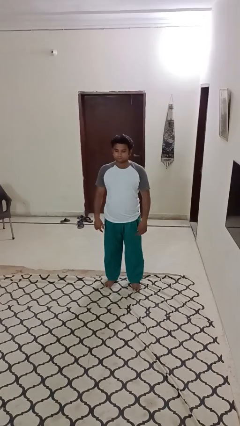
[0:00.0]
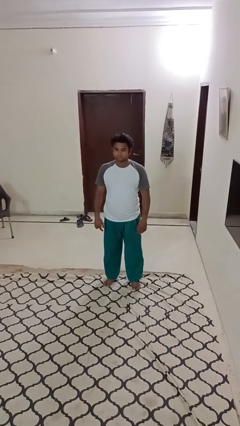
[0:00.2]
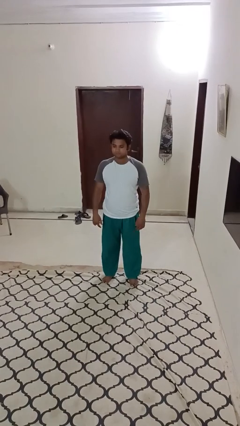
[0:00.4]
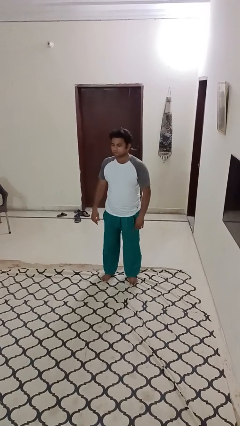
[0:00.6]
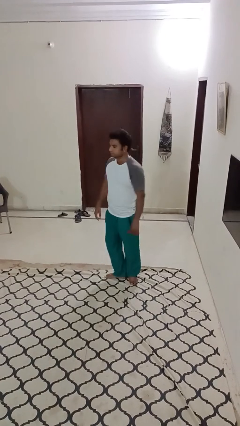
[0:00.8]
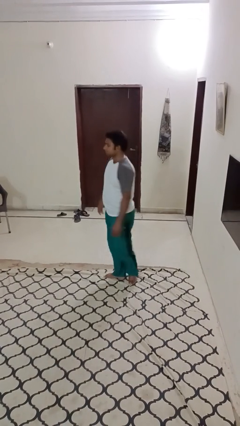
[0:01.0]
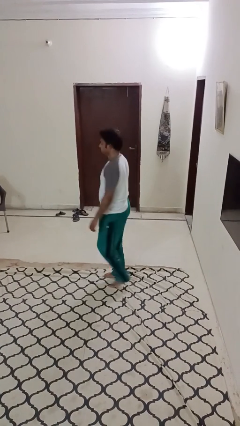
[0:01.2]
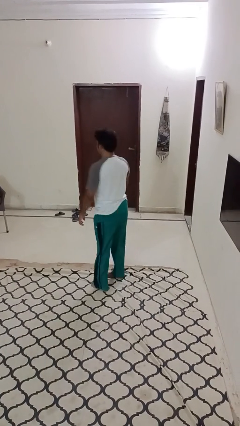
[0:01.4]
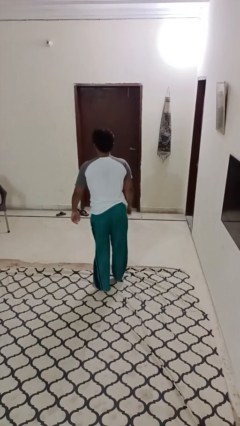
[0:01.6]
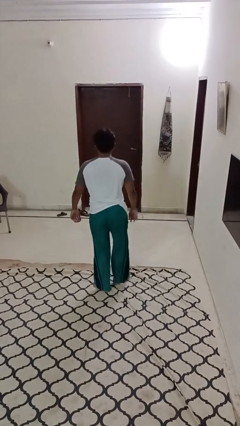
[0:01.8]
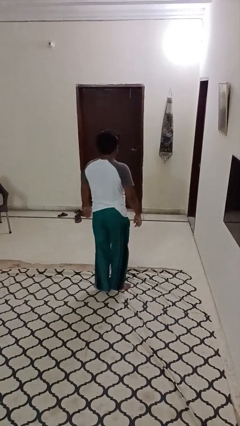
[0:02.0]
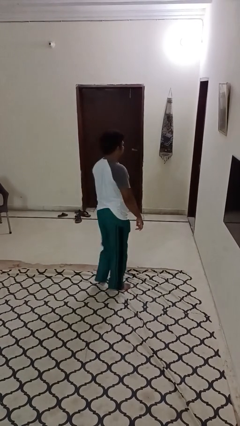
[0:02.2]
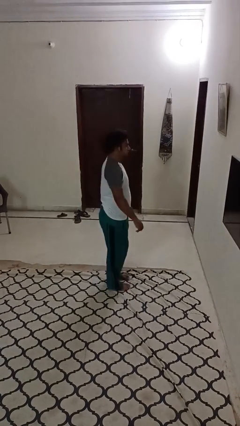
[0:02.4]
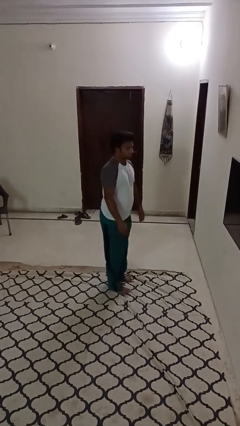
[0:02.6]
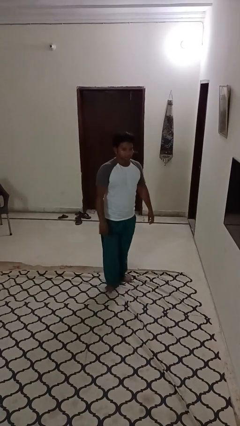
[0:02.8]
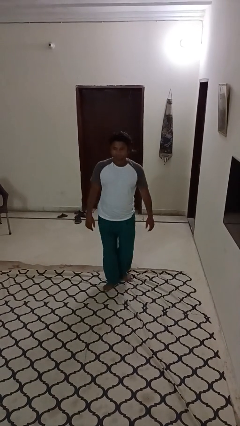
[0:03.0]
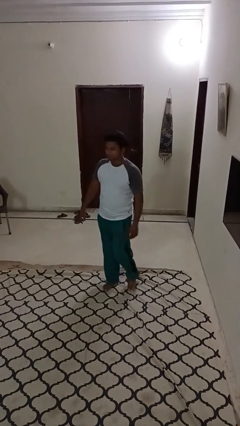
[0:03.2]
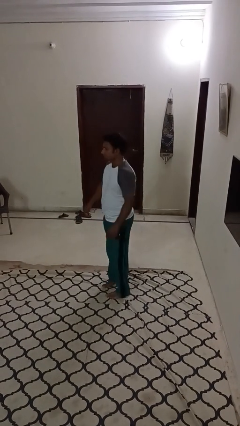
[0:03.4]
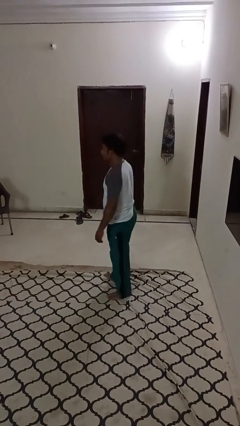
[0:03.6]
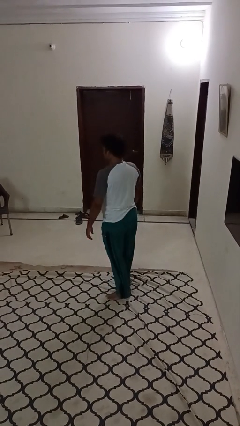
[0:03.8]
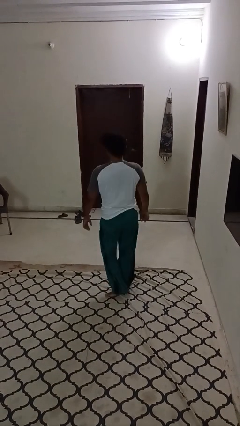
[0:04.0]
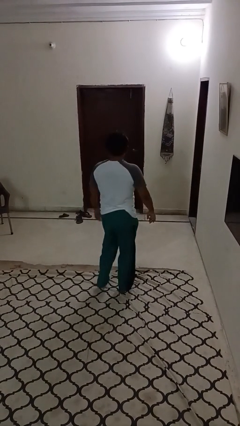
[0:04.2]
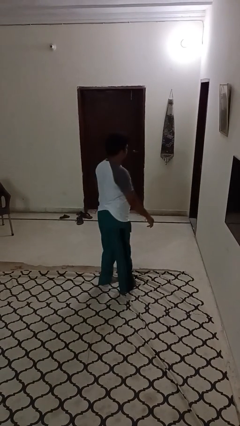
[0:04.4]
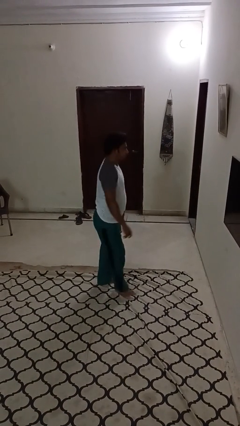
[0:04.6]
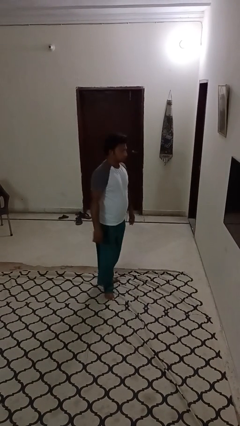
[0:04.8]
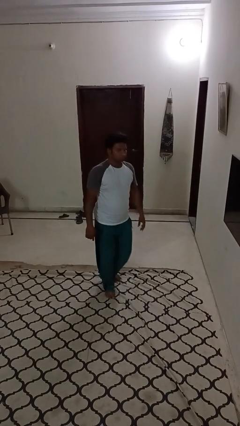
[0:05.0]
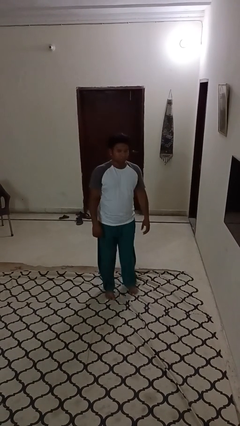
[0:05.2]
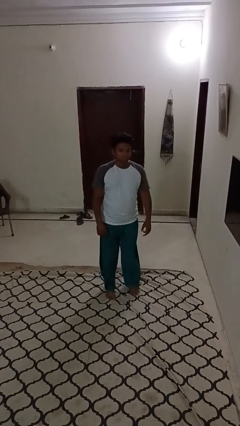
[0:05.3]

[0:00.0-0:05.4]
person twirls

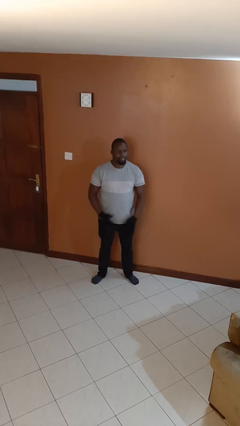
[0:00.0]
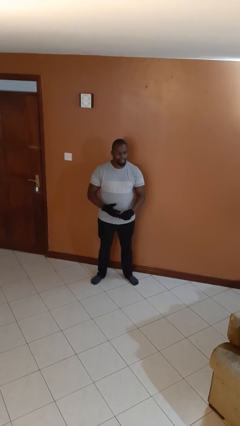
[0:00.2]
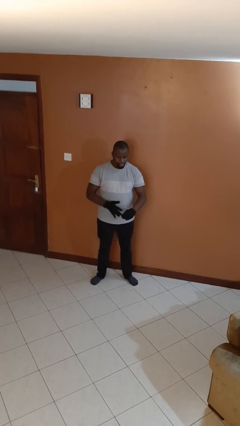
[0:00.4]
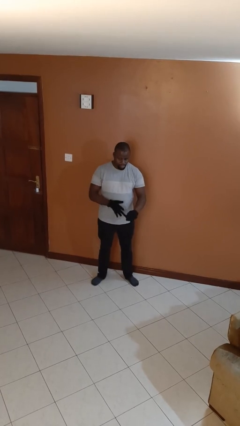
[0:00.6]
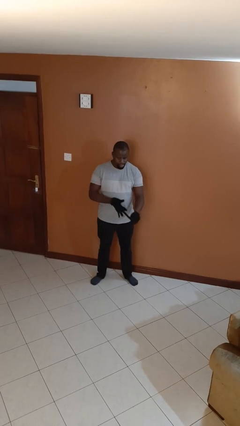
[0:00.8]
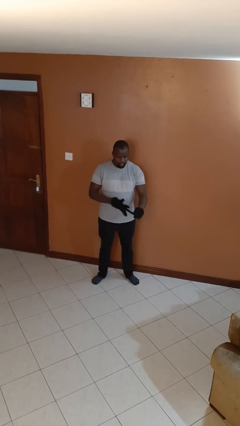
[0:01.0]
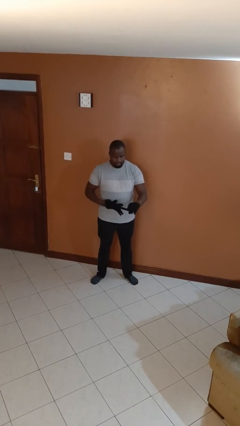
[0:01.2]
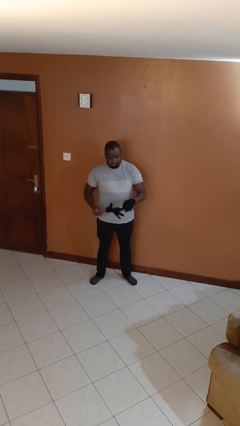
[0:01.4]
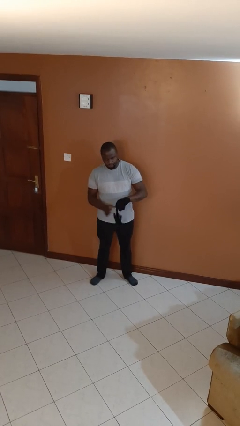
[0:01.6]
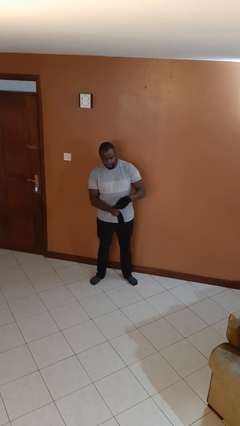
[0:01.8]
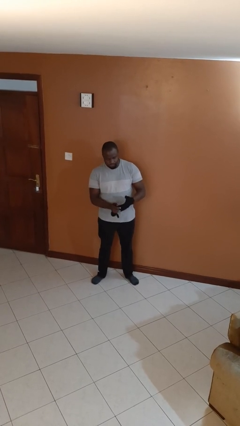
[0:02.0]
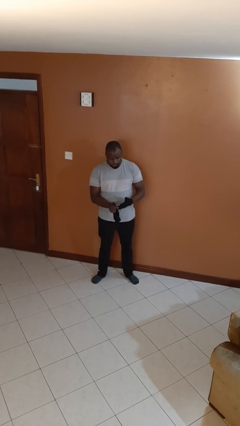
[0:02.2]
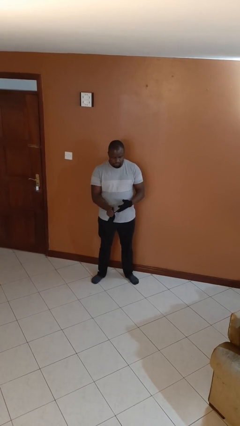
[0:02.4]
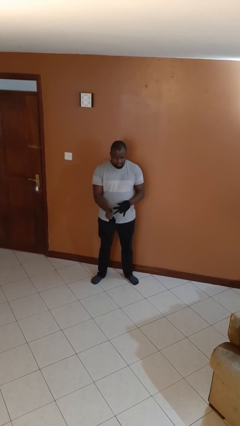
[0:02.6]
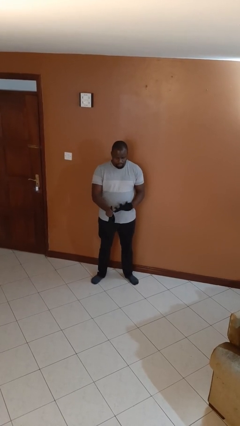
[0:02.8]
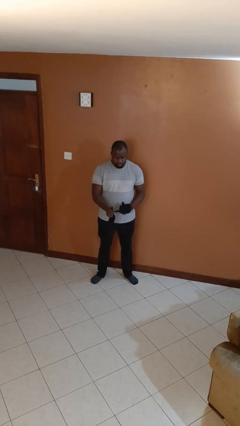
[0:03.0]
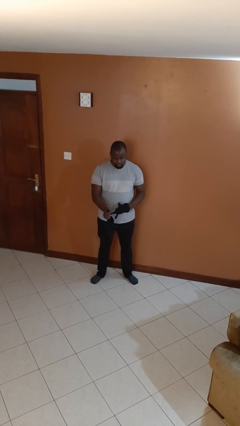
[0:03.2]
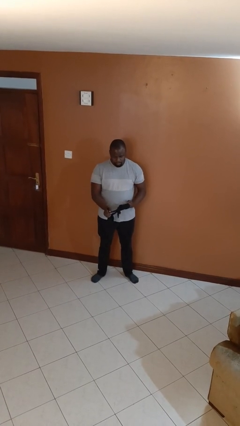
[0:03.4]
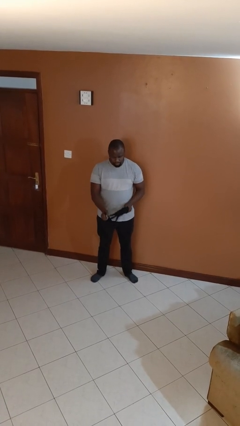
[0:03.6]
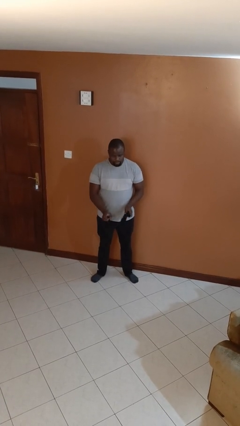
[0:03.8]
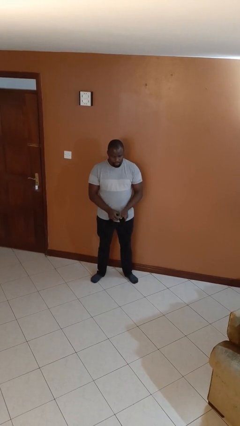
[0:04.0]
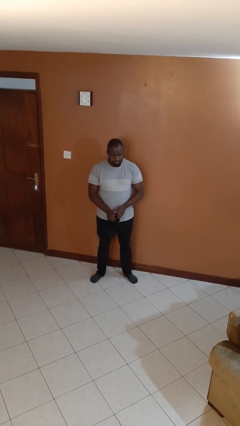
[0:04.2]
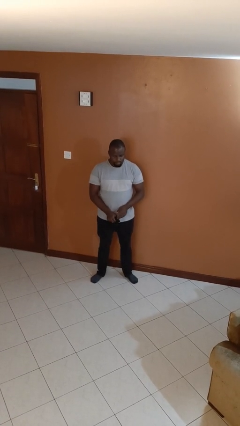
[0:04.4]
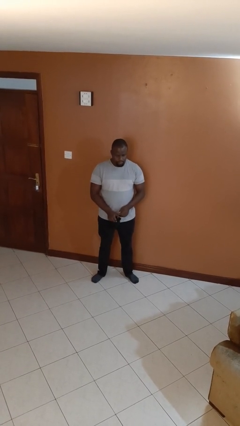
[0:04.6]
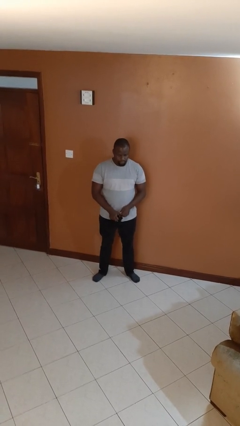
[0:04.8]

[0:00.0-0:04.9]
person takes off gloves

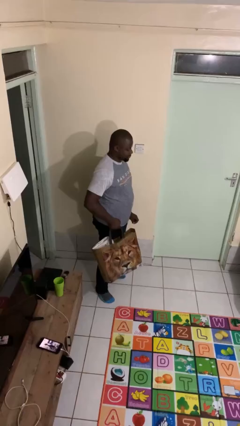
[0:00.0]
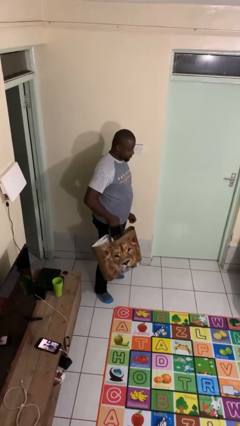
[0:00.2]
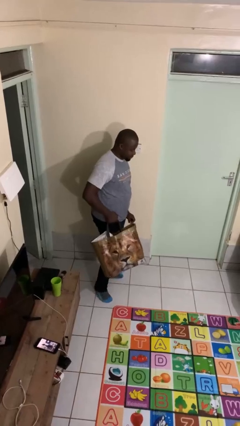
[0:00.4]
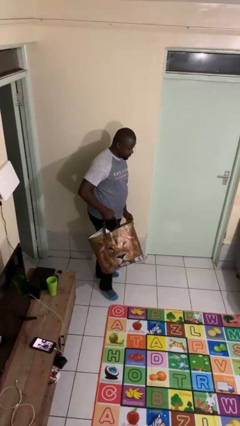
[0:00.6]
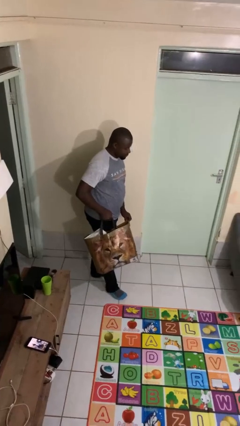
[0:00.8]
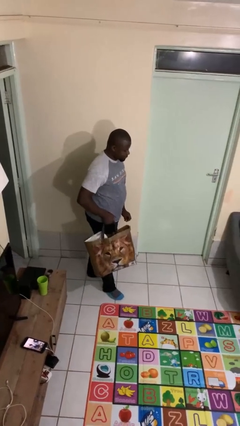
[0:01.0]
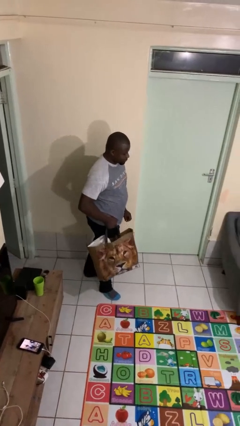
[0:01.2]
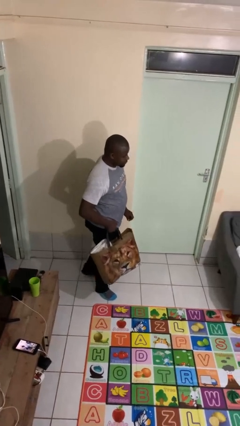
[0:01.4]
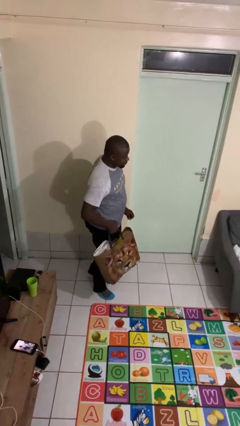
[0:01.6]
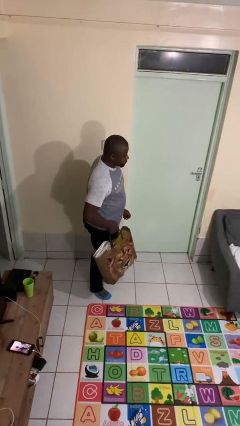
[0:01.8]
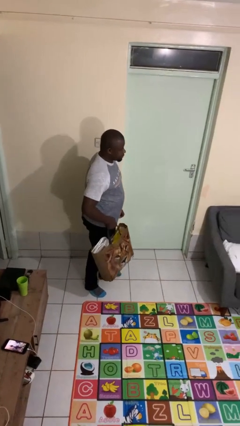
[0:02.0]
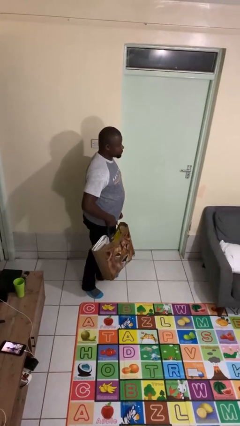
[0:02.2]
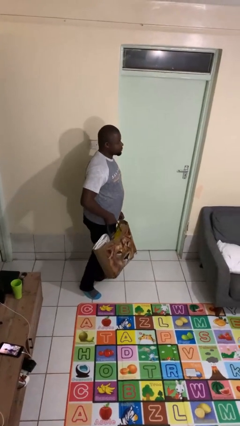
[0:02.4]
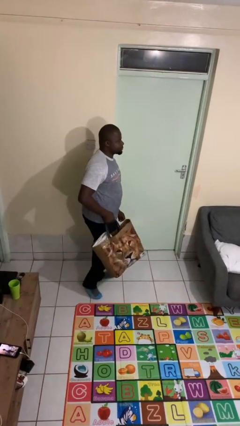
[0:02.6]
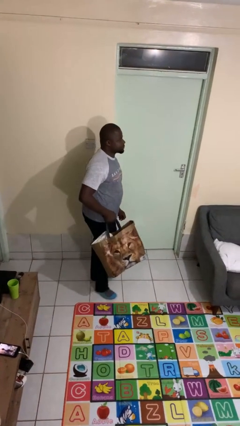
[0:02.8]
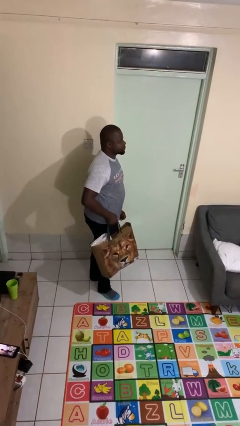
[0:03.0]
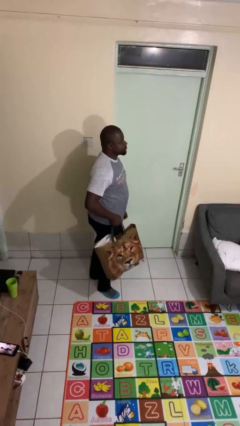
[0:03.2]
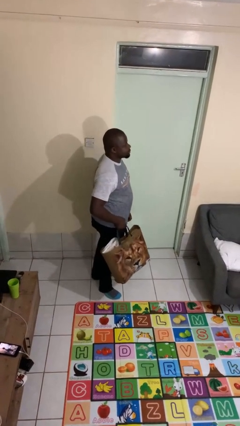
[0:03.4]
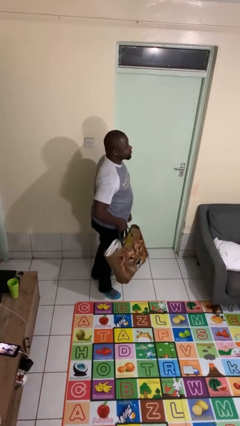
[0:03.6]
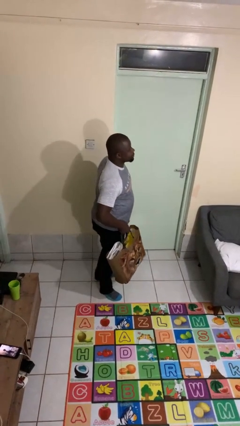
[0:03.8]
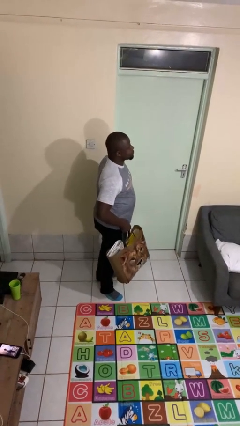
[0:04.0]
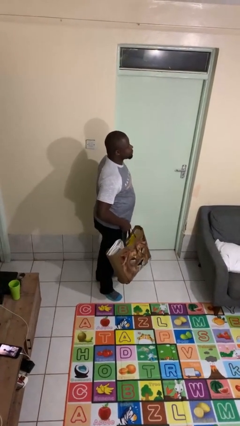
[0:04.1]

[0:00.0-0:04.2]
person carries groceries

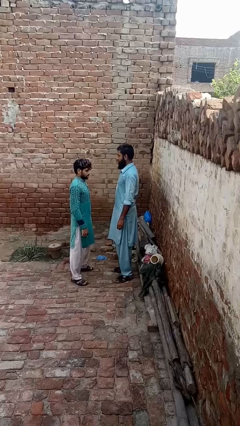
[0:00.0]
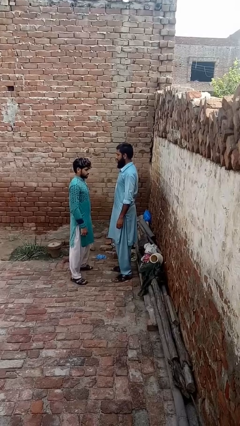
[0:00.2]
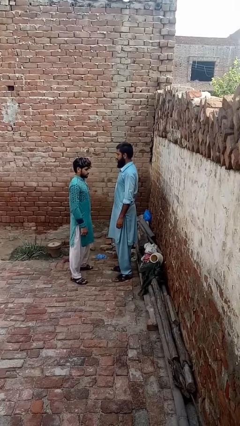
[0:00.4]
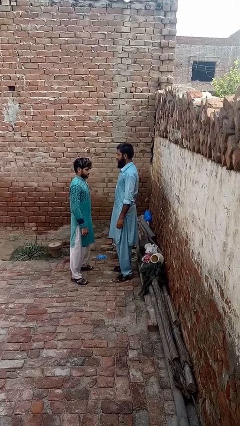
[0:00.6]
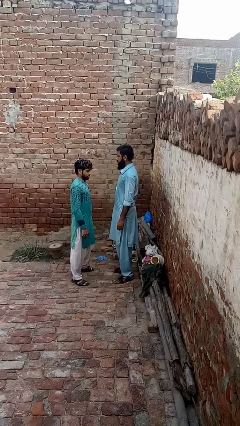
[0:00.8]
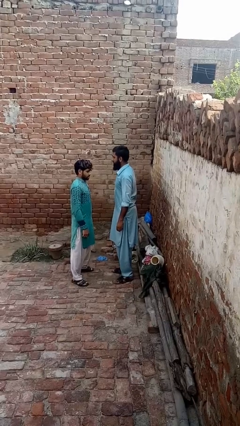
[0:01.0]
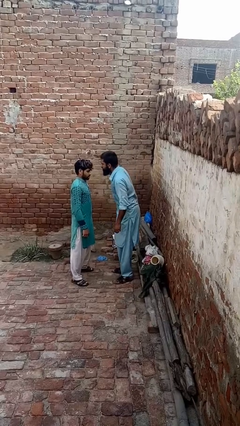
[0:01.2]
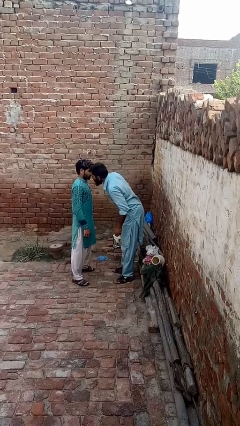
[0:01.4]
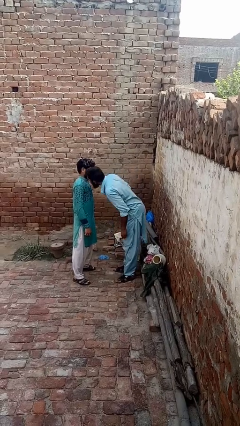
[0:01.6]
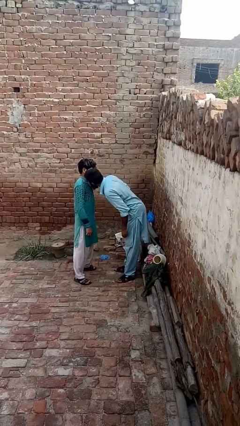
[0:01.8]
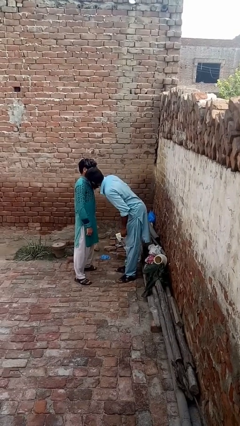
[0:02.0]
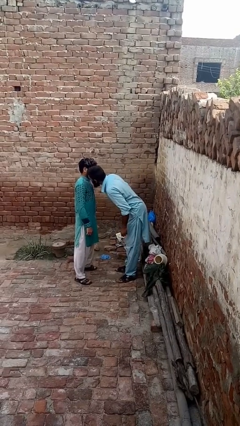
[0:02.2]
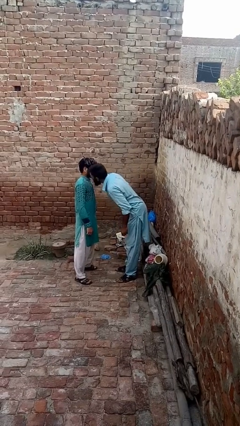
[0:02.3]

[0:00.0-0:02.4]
person kisses cheek of person

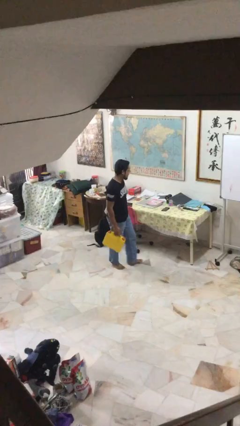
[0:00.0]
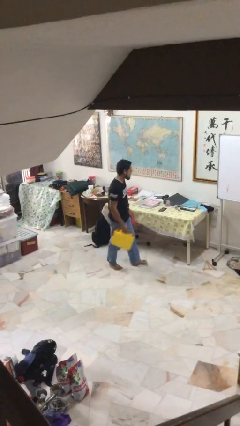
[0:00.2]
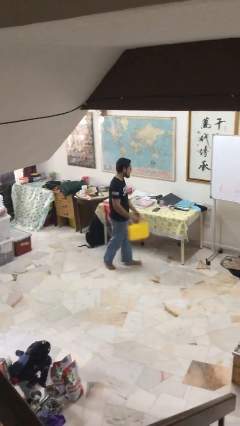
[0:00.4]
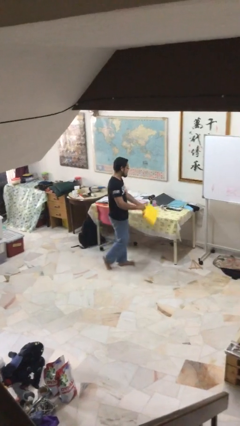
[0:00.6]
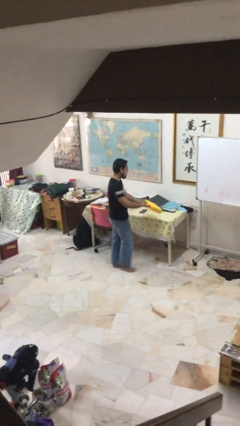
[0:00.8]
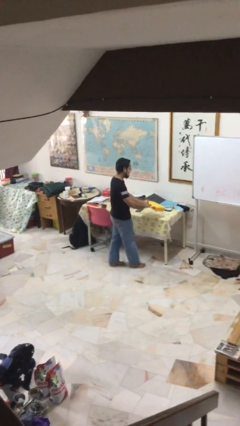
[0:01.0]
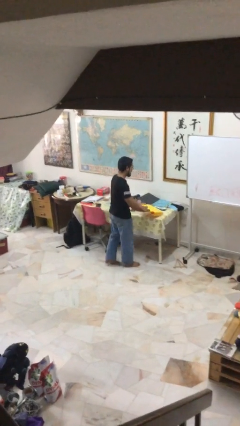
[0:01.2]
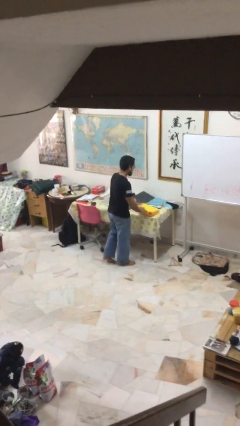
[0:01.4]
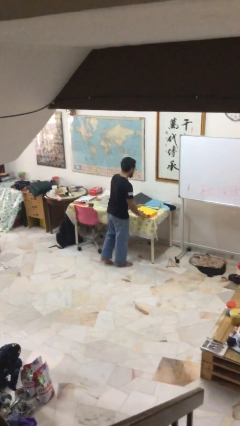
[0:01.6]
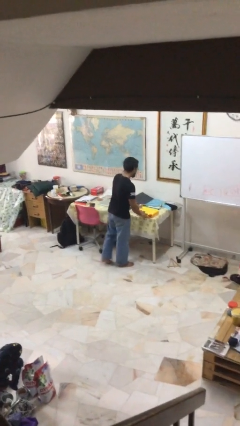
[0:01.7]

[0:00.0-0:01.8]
person puts down object on table
